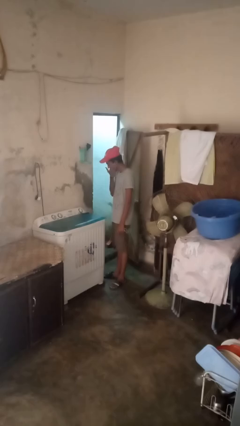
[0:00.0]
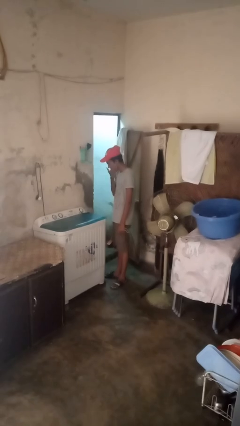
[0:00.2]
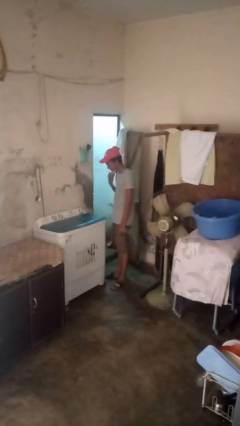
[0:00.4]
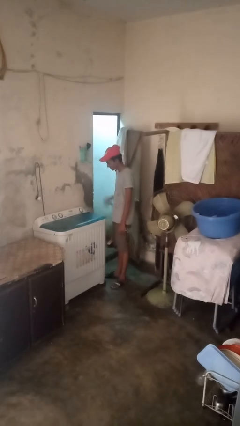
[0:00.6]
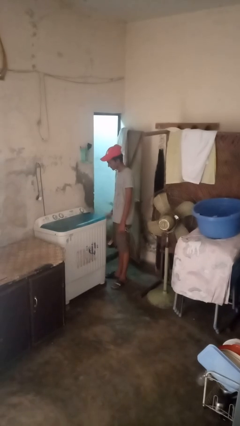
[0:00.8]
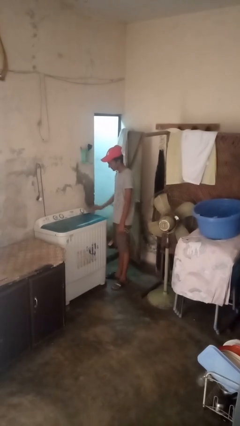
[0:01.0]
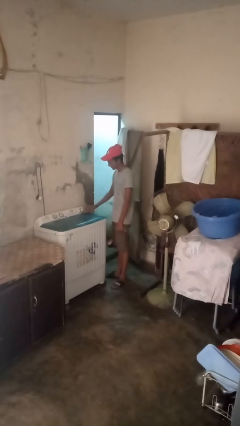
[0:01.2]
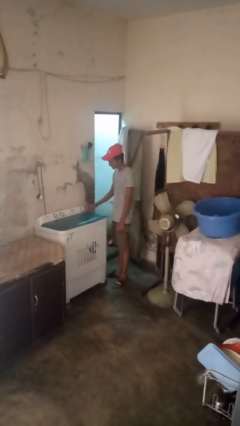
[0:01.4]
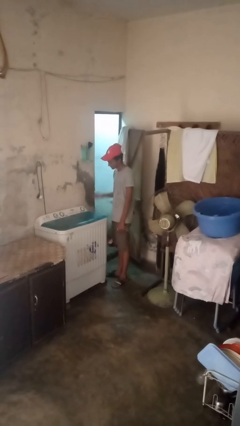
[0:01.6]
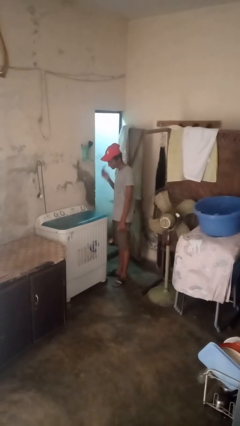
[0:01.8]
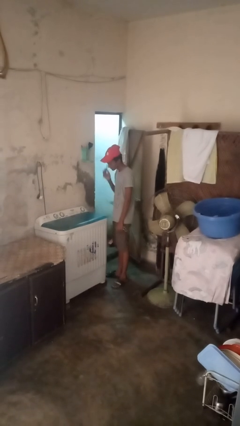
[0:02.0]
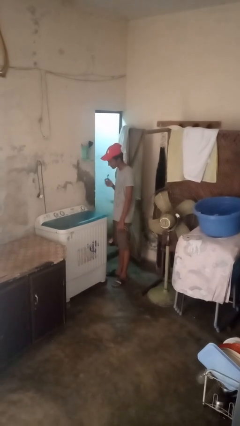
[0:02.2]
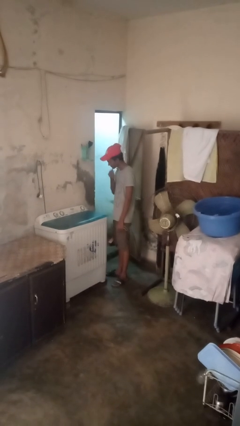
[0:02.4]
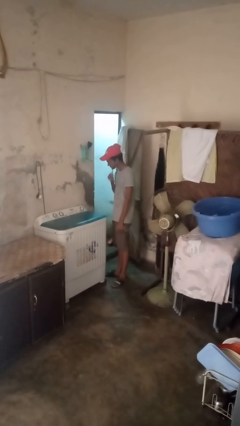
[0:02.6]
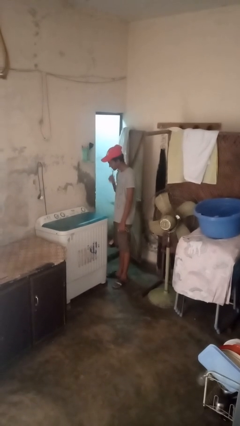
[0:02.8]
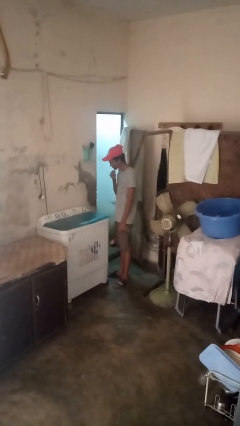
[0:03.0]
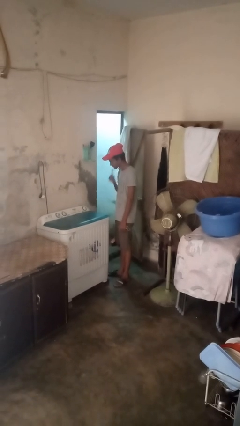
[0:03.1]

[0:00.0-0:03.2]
person shaves face

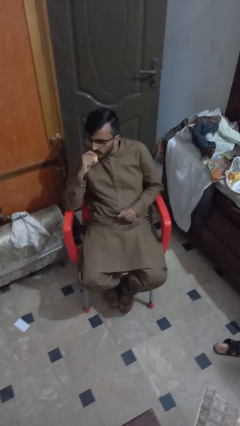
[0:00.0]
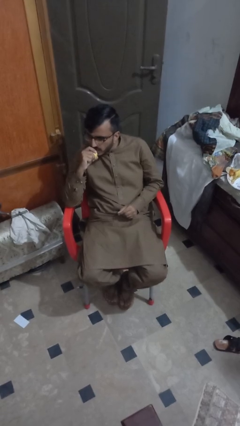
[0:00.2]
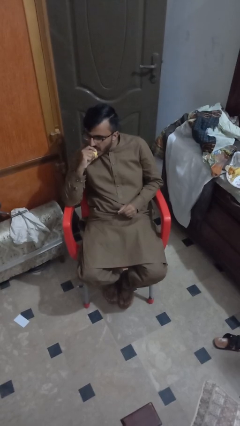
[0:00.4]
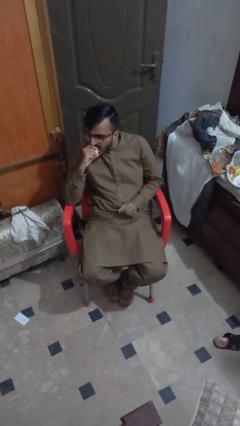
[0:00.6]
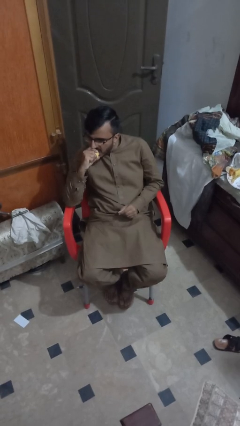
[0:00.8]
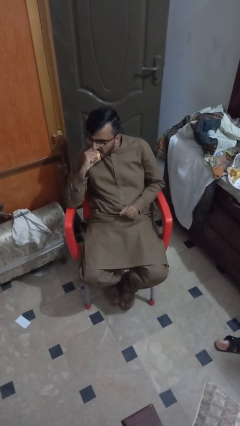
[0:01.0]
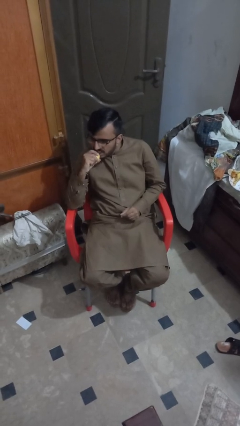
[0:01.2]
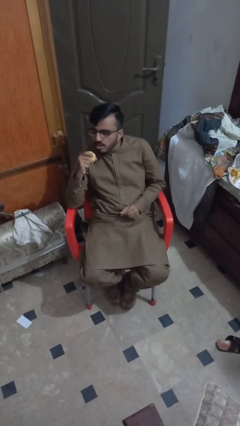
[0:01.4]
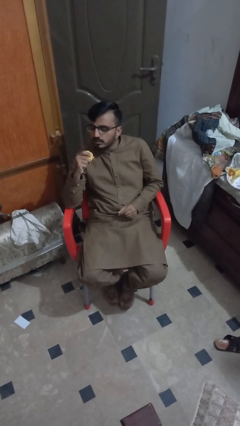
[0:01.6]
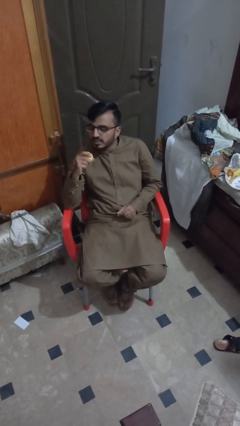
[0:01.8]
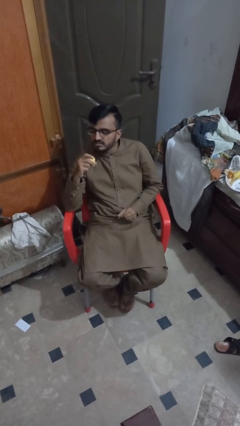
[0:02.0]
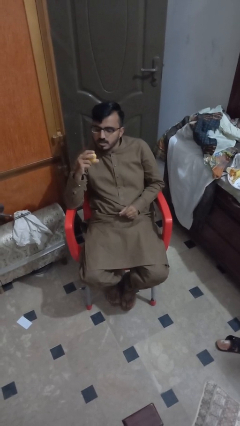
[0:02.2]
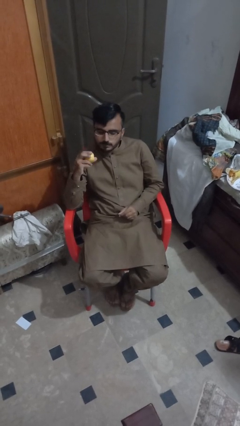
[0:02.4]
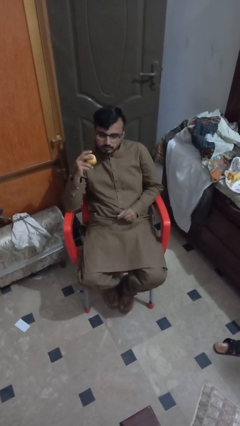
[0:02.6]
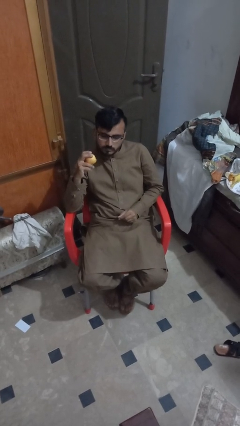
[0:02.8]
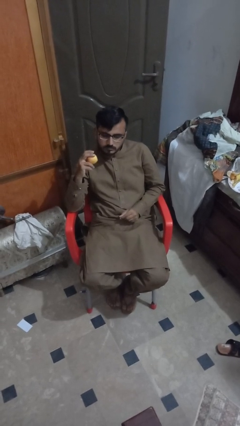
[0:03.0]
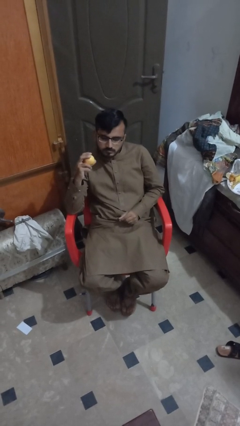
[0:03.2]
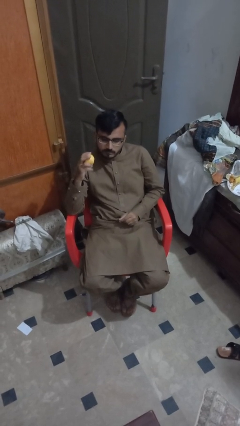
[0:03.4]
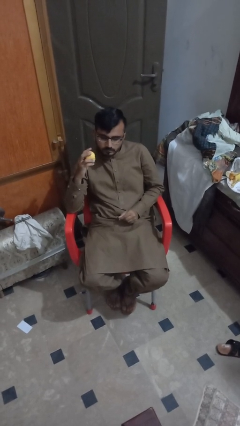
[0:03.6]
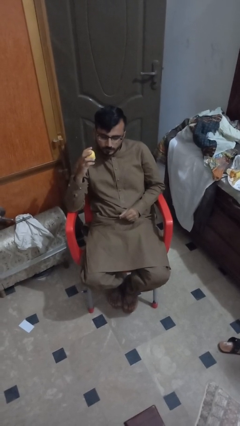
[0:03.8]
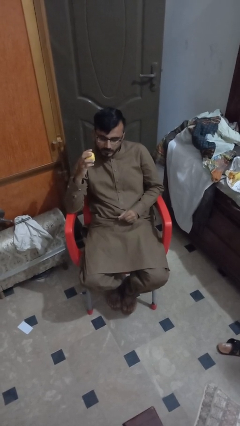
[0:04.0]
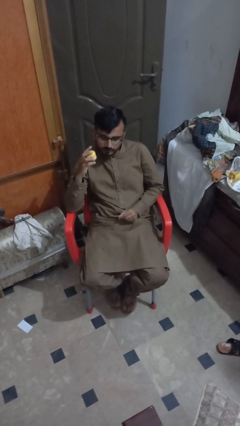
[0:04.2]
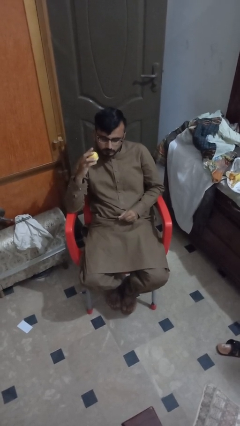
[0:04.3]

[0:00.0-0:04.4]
person eats apple

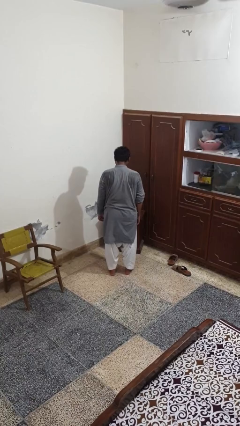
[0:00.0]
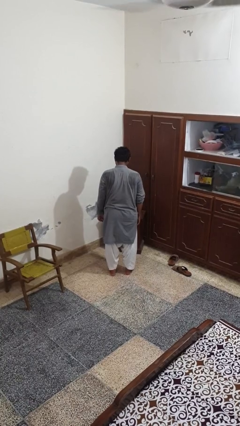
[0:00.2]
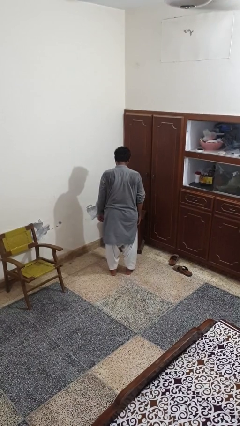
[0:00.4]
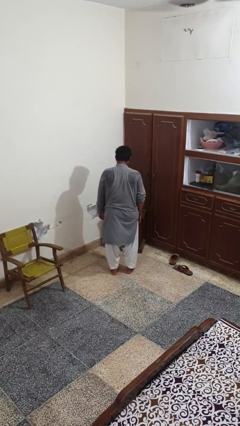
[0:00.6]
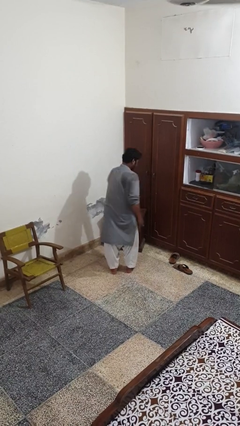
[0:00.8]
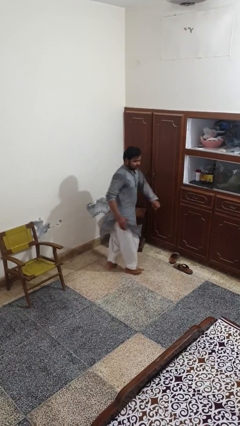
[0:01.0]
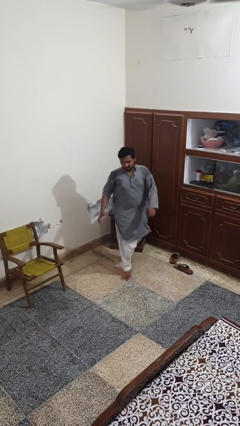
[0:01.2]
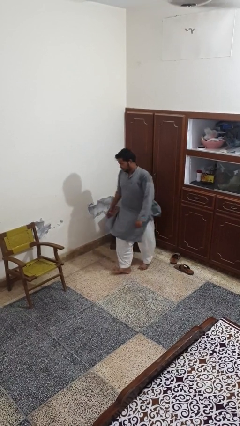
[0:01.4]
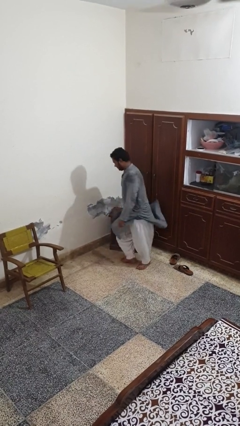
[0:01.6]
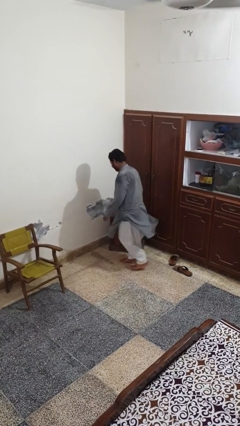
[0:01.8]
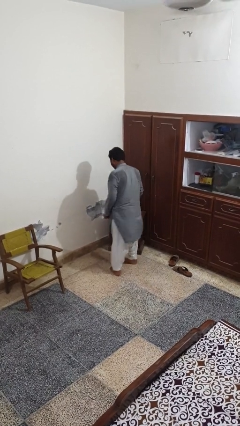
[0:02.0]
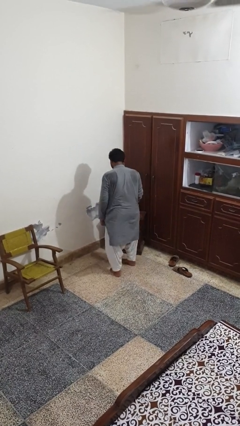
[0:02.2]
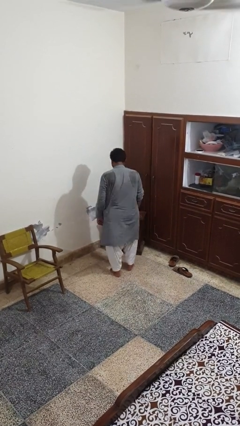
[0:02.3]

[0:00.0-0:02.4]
person twirls

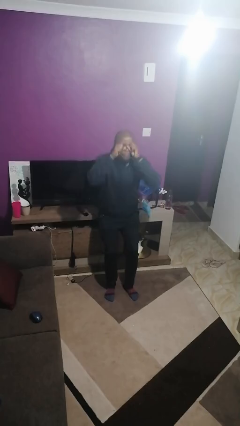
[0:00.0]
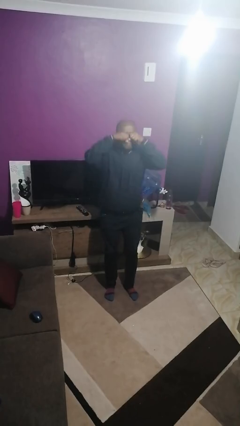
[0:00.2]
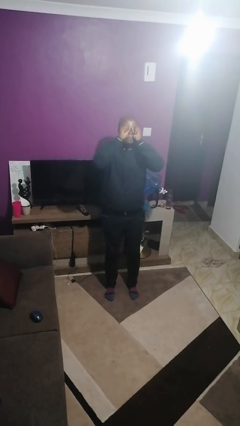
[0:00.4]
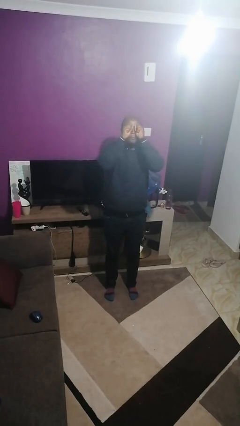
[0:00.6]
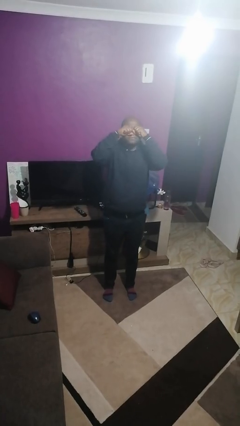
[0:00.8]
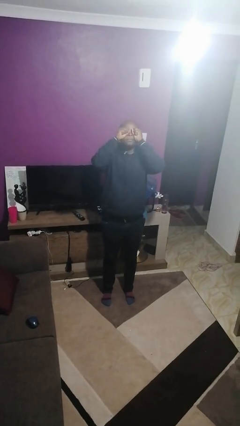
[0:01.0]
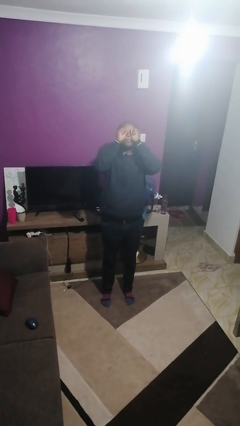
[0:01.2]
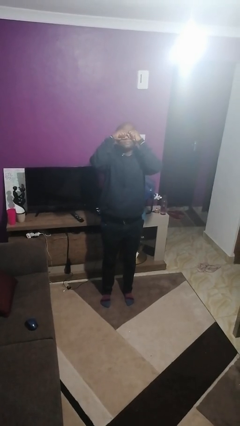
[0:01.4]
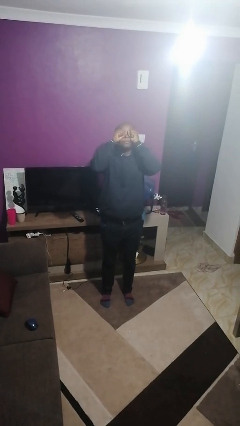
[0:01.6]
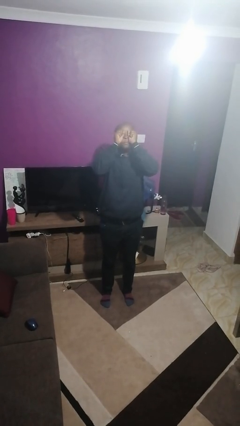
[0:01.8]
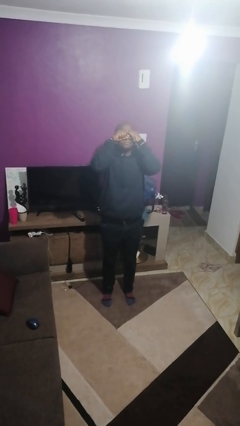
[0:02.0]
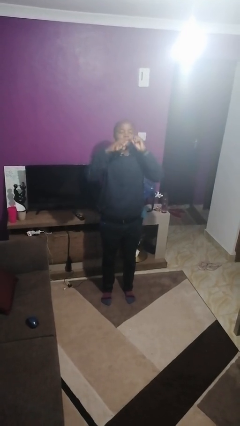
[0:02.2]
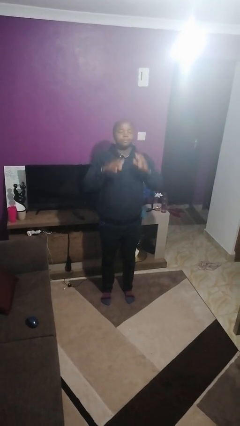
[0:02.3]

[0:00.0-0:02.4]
person rubs eyes

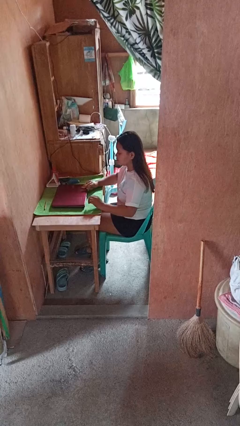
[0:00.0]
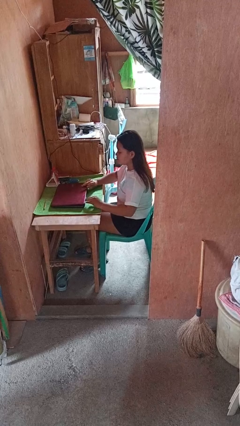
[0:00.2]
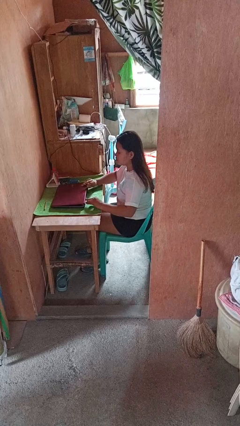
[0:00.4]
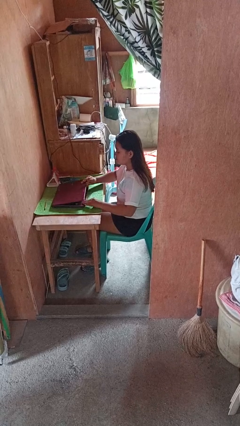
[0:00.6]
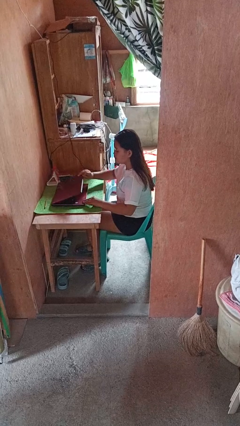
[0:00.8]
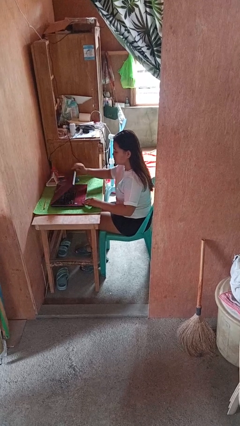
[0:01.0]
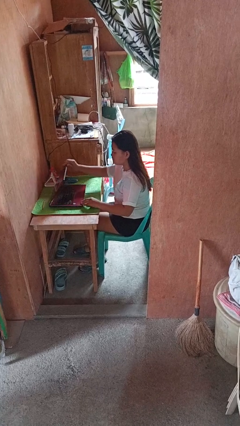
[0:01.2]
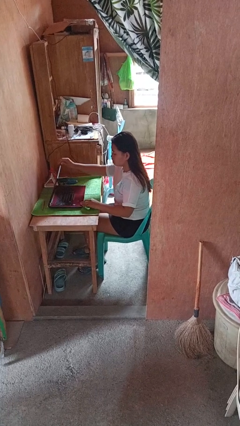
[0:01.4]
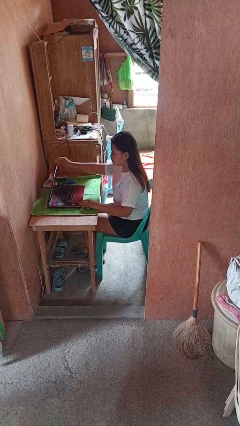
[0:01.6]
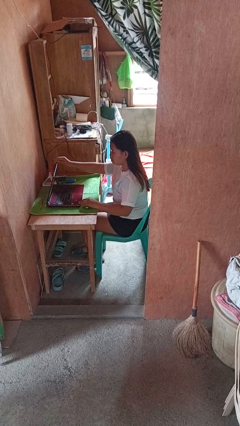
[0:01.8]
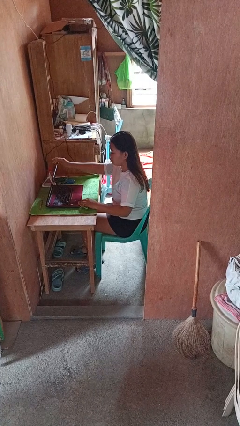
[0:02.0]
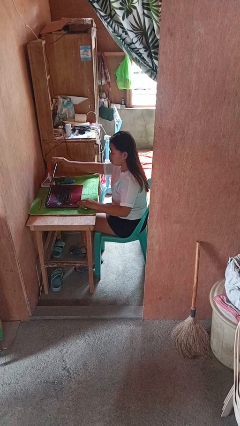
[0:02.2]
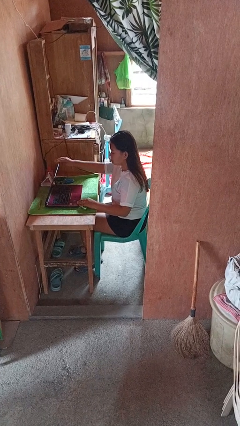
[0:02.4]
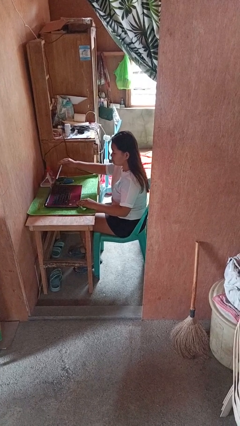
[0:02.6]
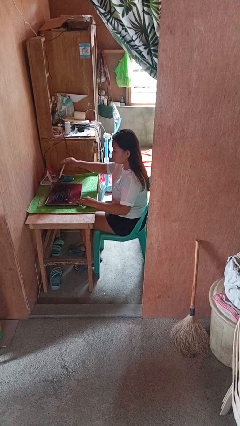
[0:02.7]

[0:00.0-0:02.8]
person opens laptop

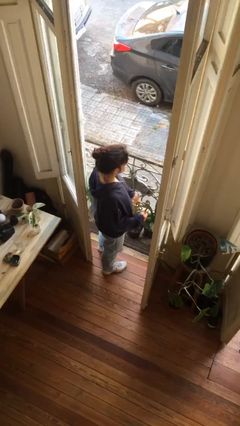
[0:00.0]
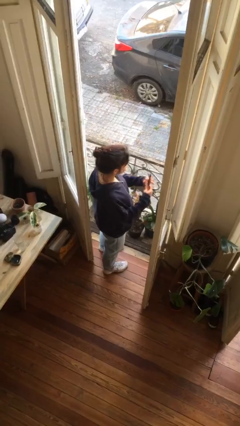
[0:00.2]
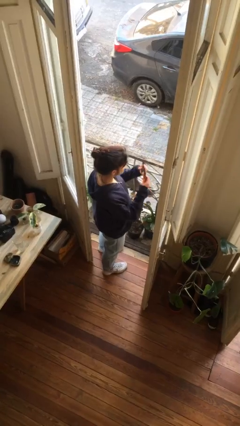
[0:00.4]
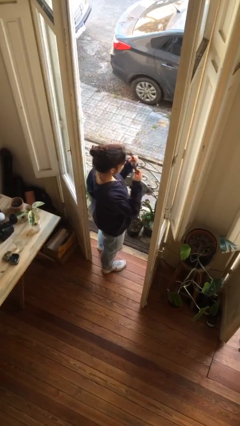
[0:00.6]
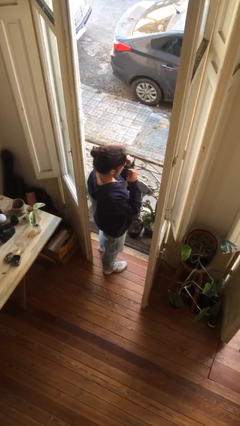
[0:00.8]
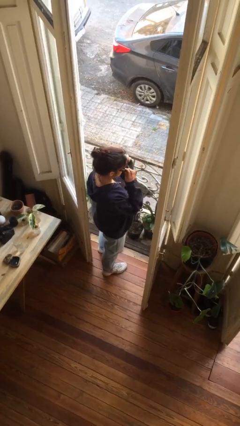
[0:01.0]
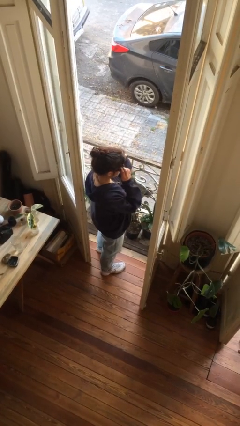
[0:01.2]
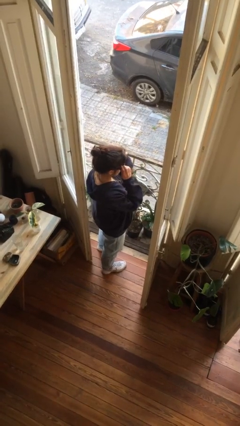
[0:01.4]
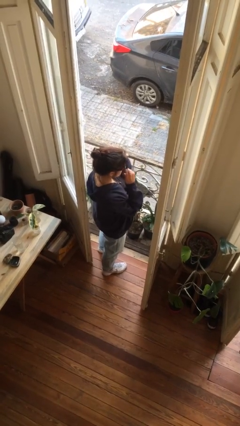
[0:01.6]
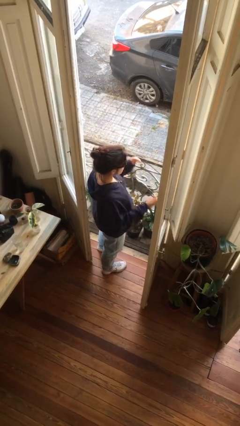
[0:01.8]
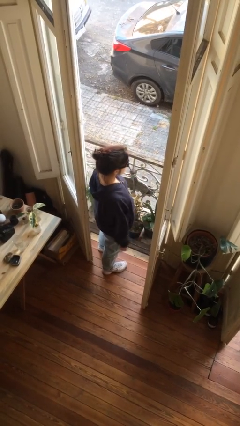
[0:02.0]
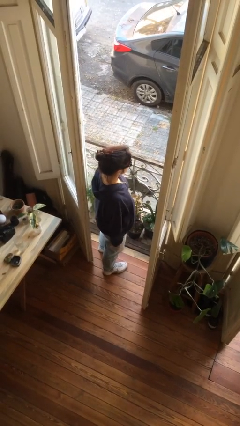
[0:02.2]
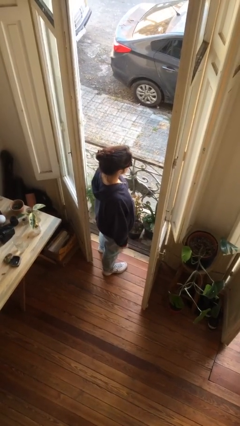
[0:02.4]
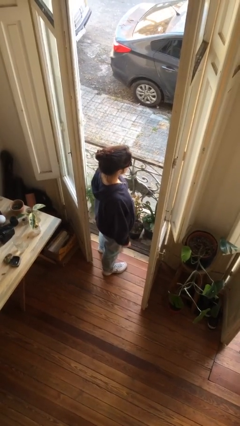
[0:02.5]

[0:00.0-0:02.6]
person puts on sunglasses
